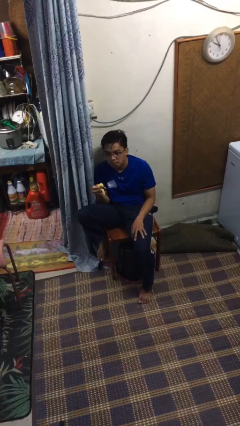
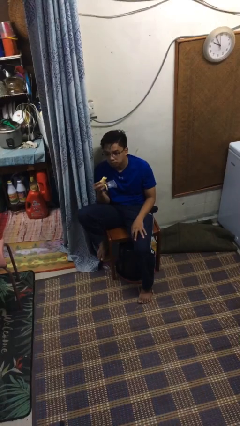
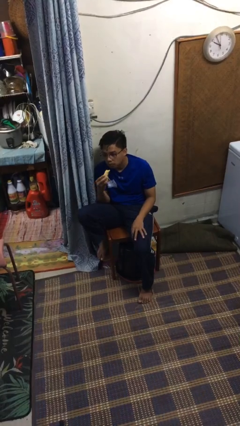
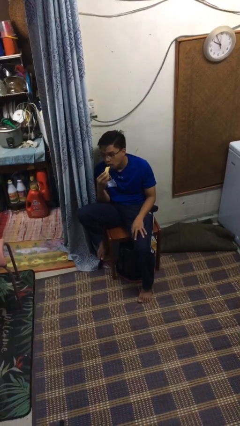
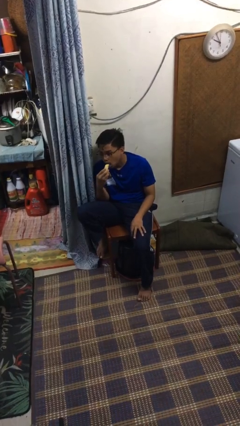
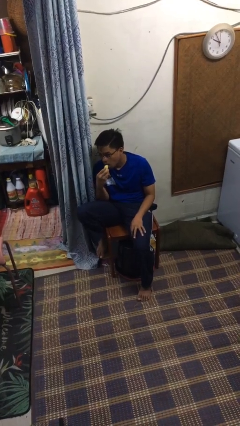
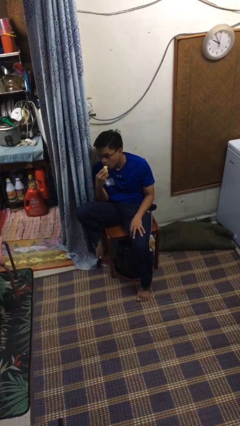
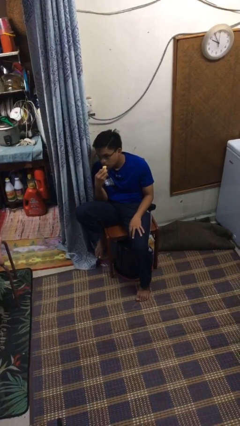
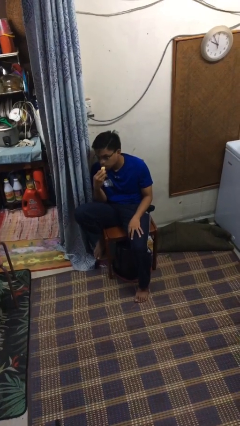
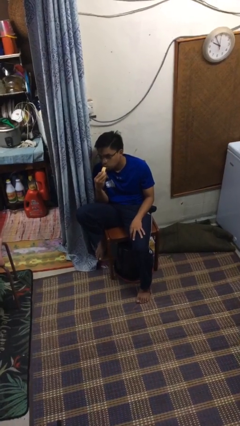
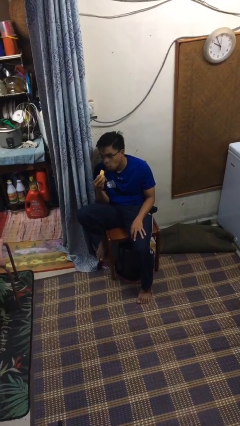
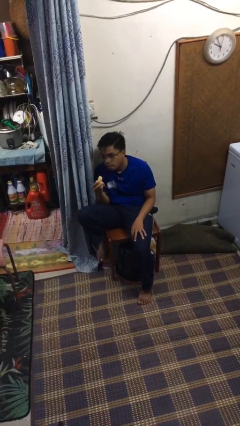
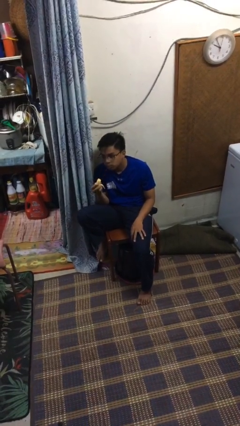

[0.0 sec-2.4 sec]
person eats banana

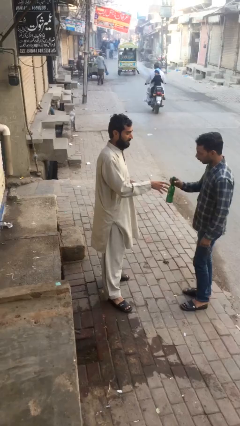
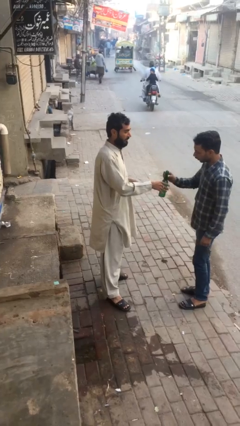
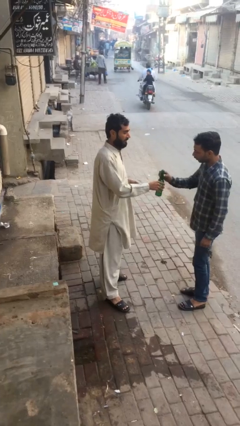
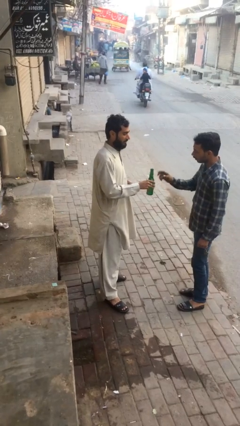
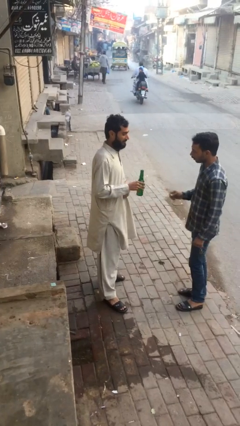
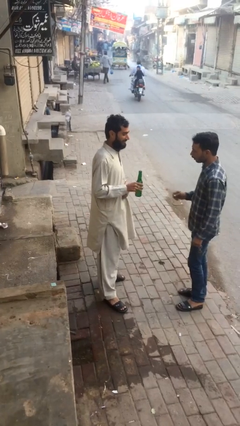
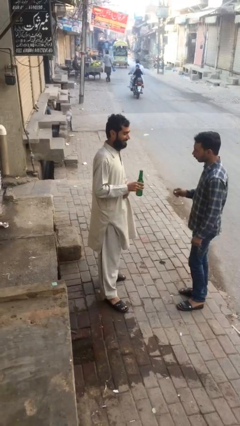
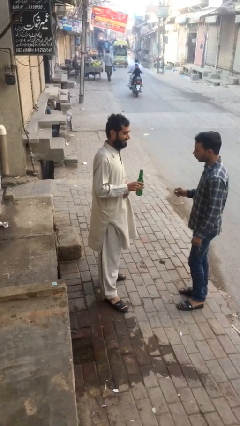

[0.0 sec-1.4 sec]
person transfers object to person

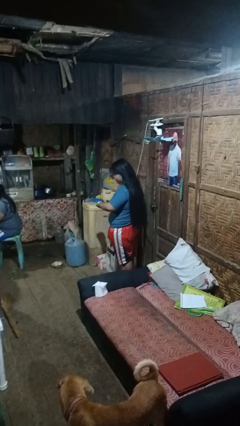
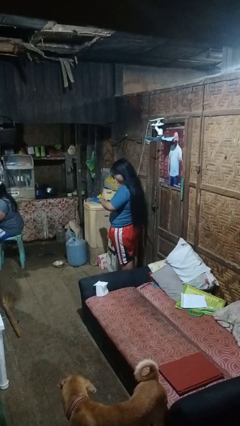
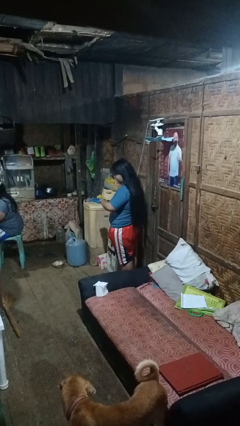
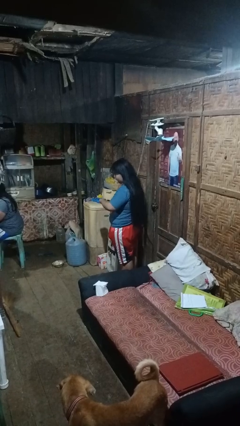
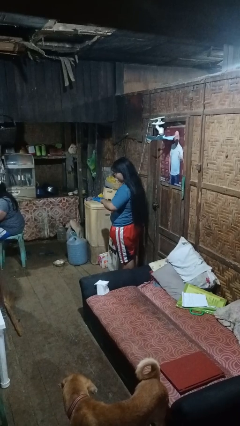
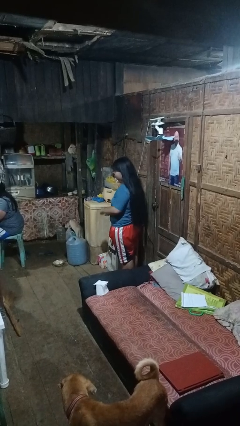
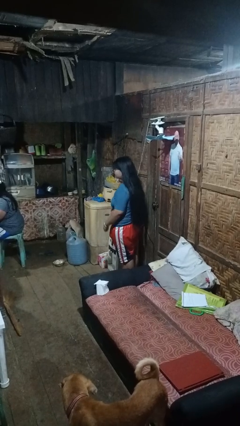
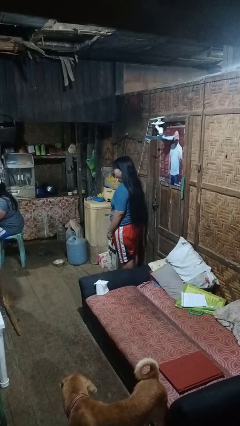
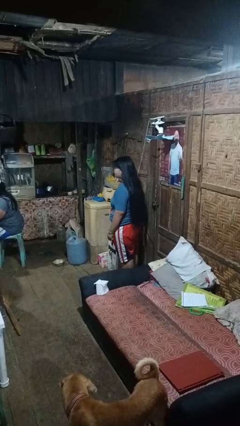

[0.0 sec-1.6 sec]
person looks at wristwatch

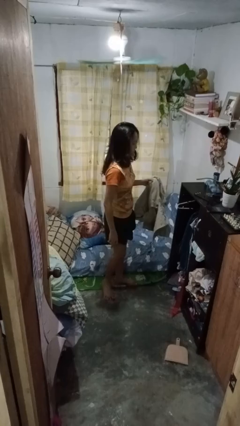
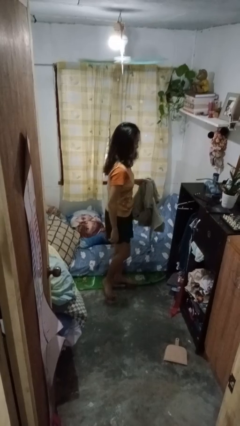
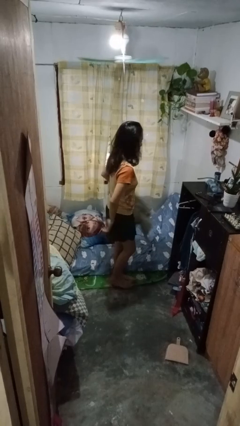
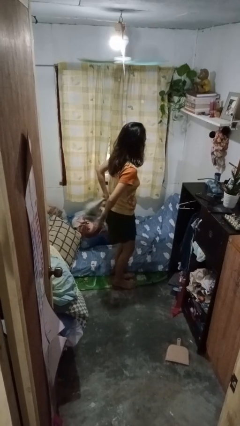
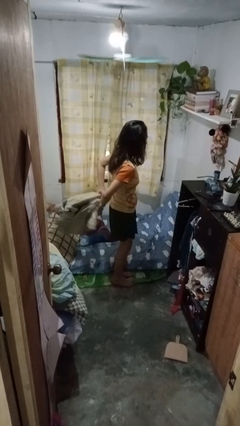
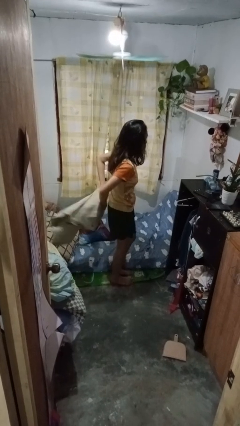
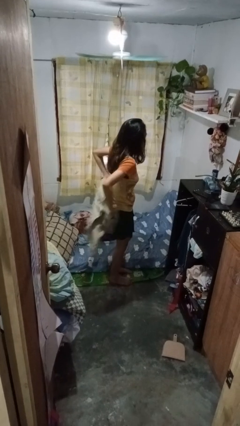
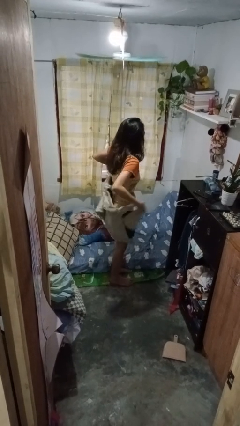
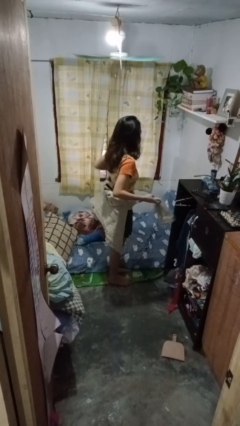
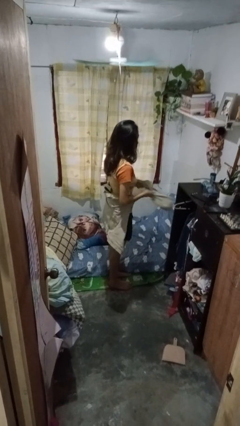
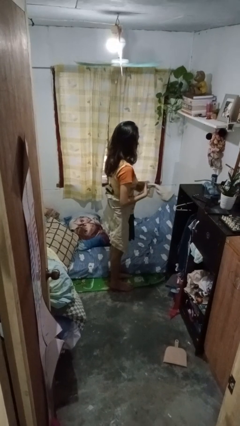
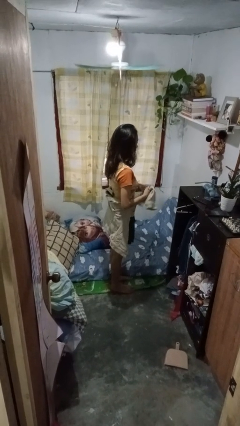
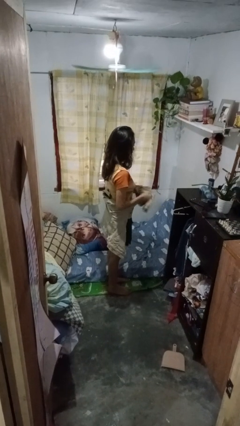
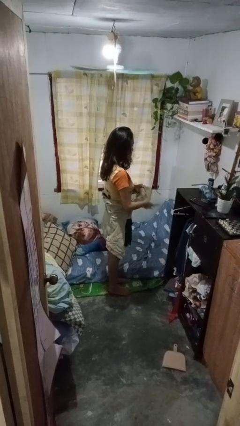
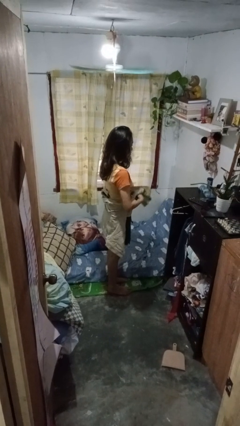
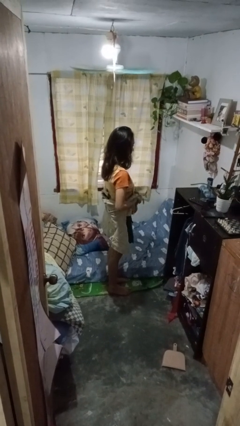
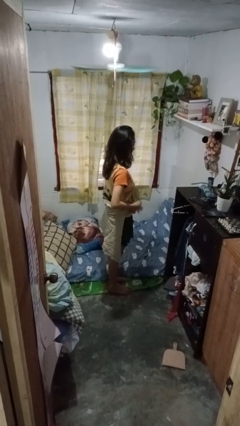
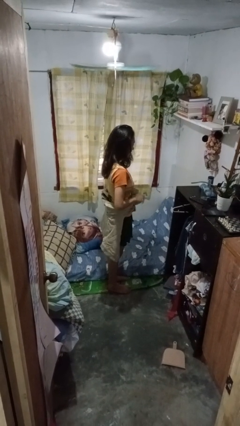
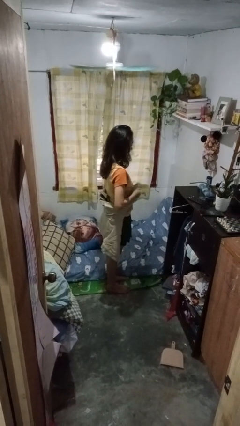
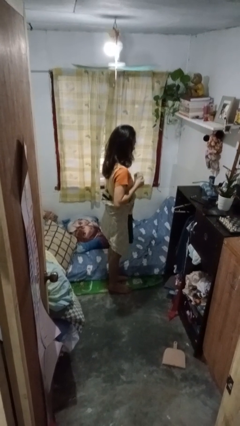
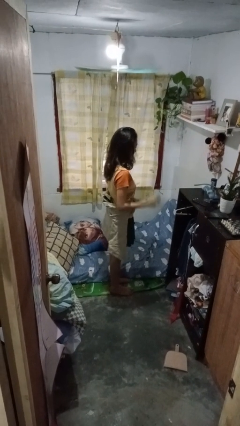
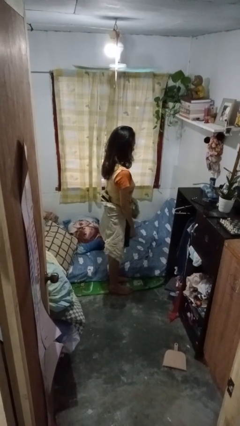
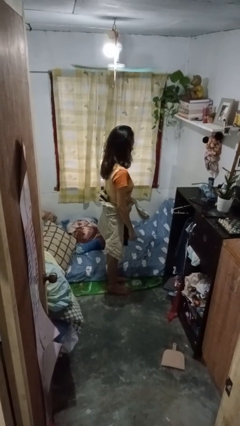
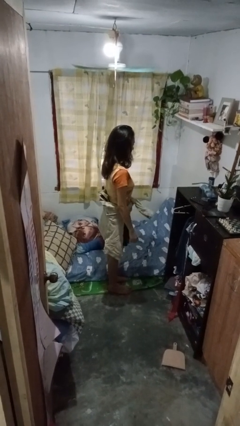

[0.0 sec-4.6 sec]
person ties jacket around waist

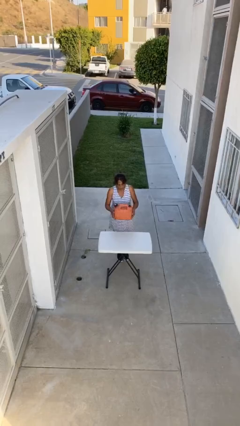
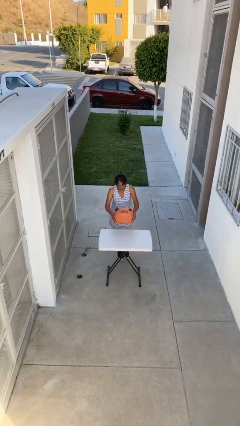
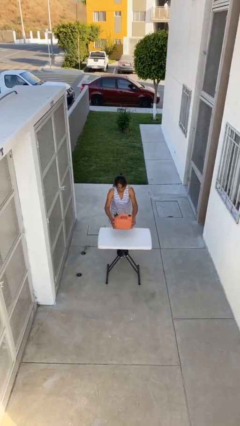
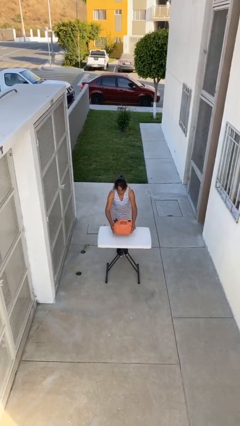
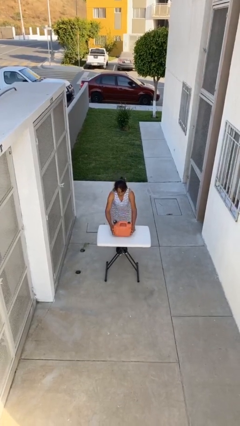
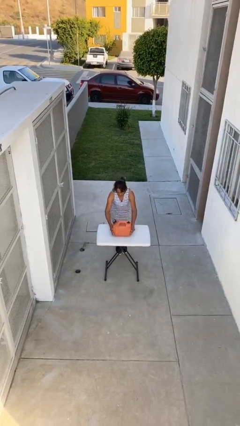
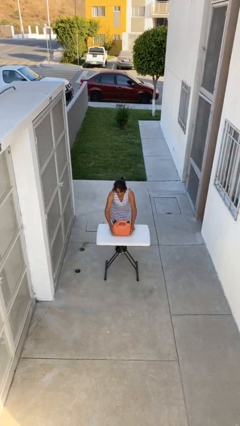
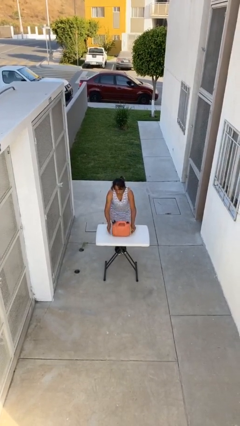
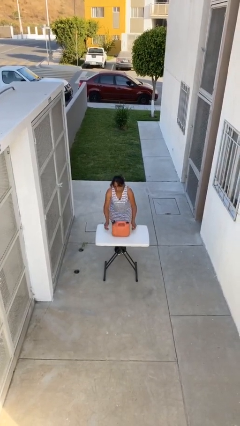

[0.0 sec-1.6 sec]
person puts down object on table

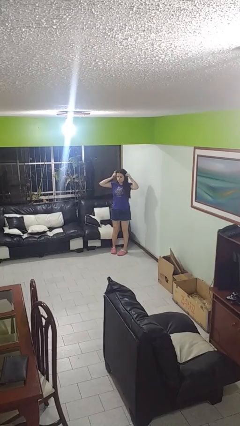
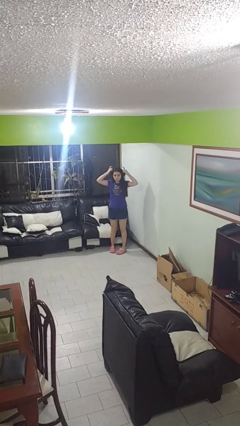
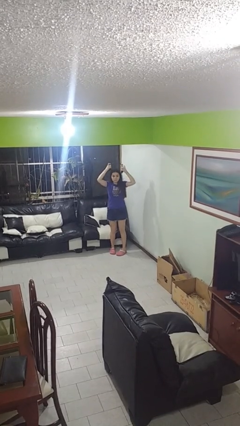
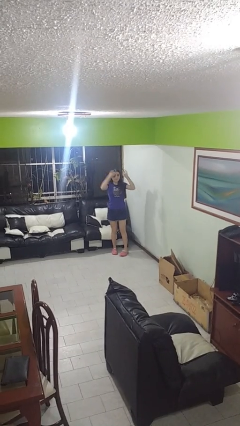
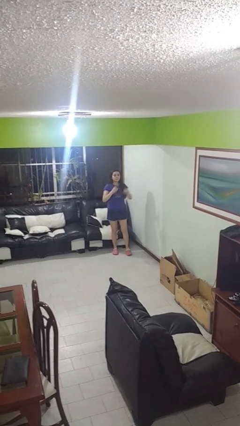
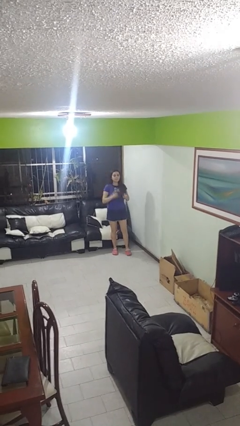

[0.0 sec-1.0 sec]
person takes off headphones

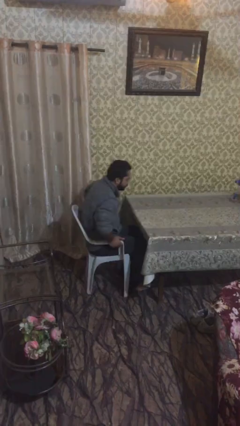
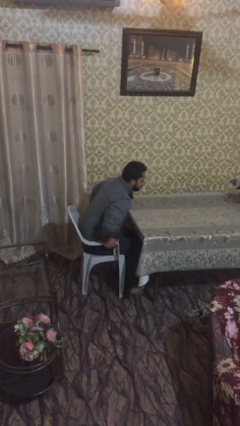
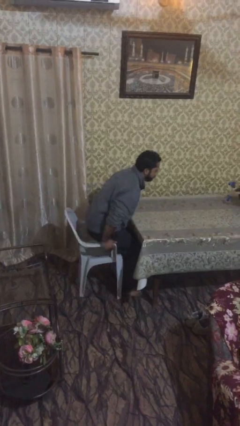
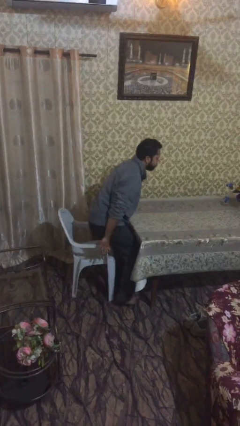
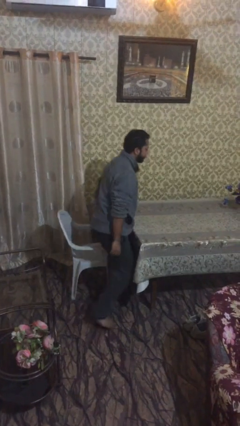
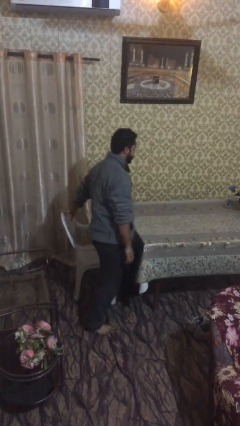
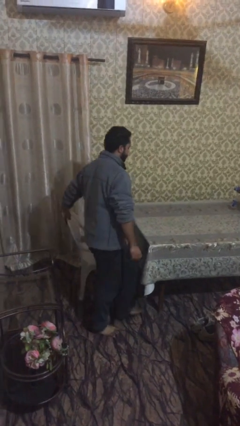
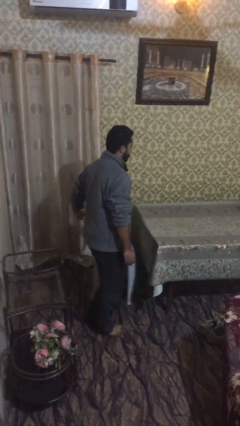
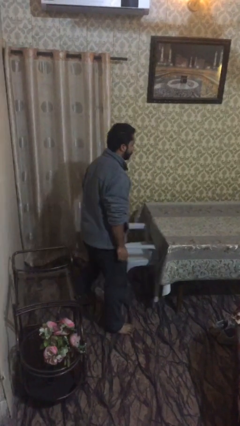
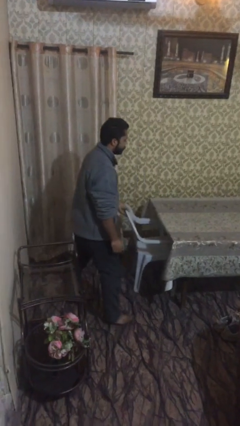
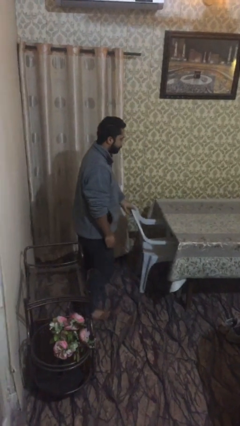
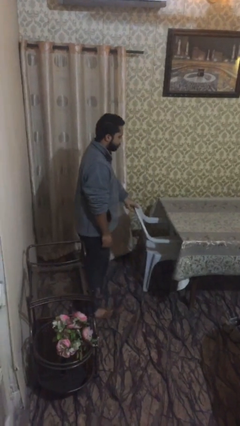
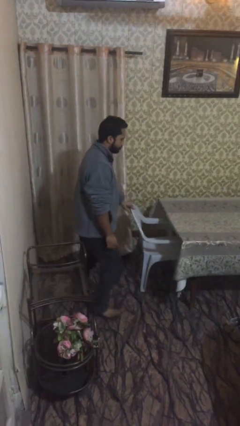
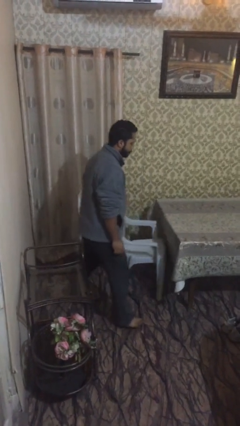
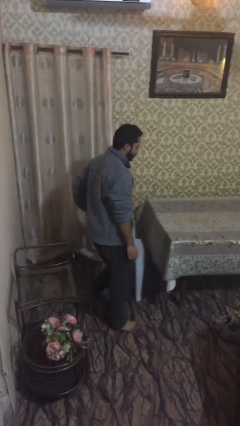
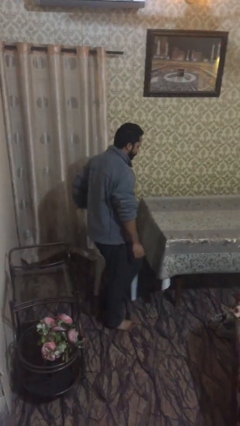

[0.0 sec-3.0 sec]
person stands up

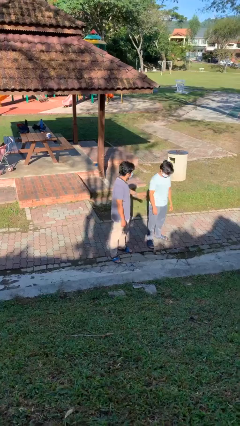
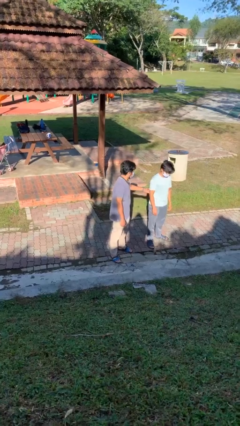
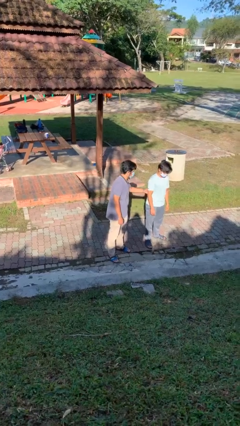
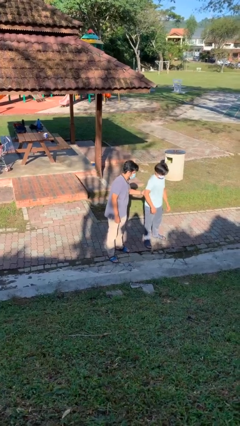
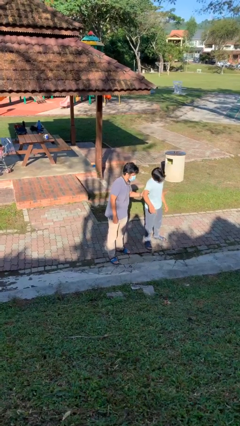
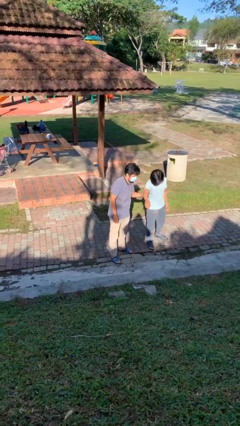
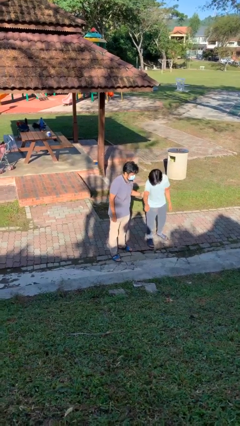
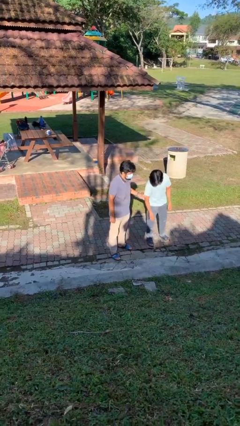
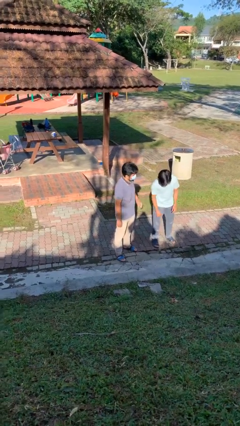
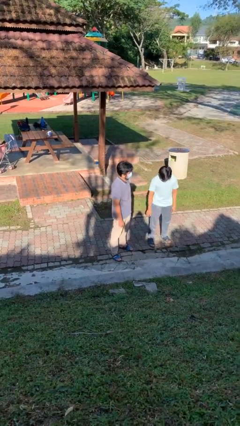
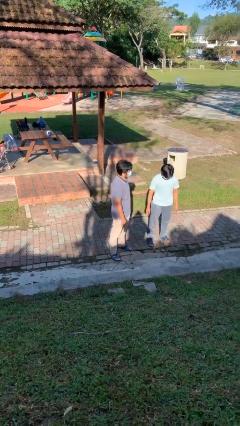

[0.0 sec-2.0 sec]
person grabs person by bicep
